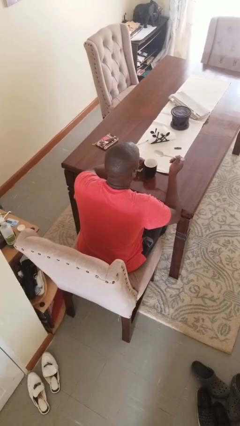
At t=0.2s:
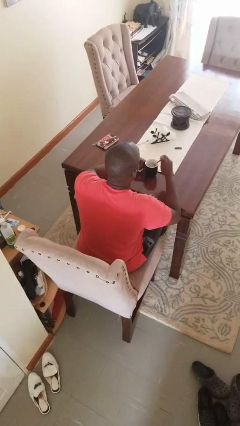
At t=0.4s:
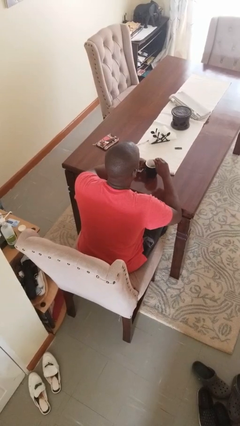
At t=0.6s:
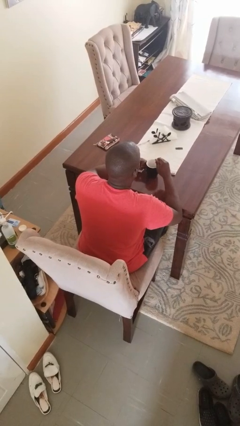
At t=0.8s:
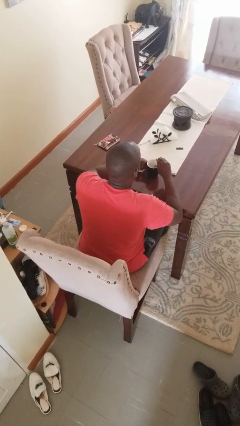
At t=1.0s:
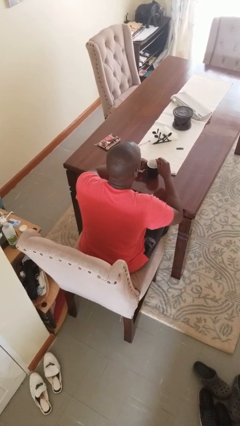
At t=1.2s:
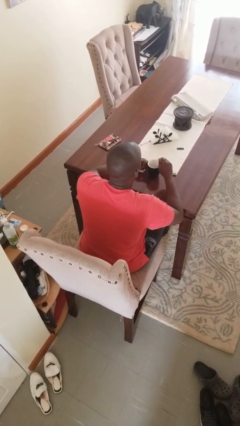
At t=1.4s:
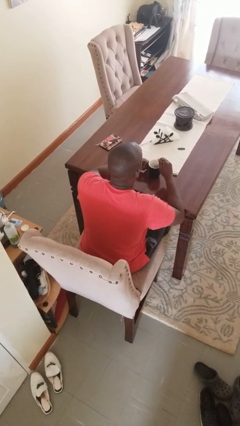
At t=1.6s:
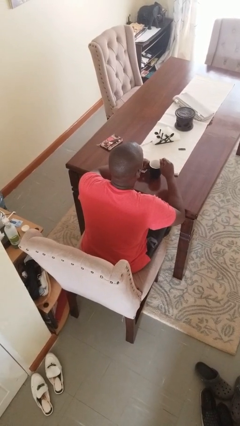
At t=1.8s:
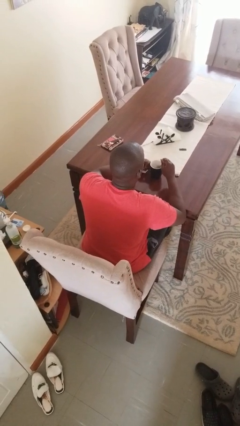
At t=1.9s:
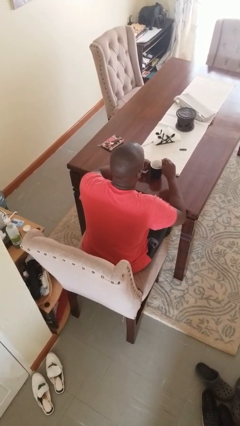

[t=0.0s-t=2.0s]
person stirs mug

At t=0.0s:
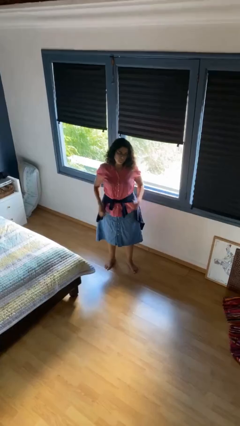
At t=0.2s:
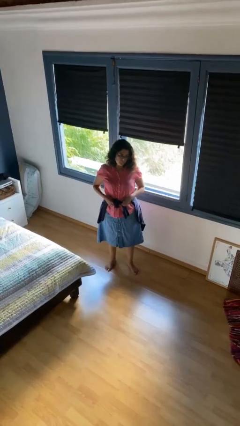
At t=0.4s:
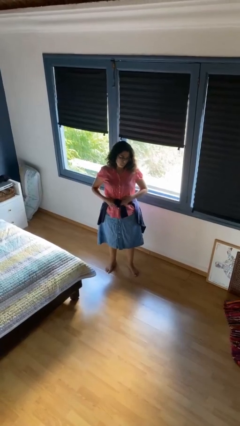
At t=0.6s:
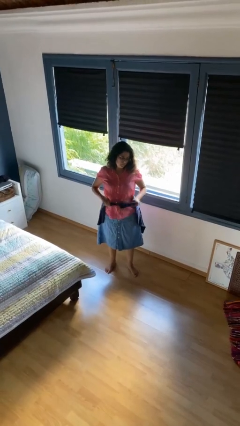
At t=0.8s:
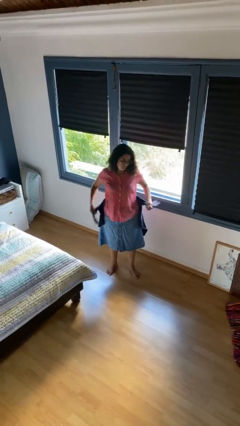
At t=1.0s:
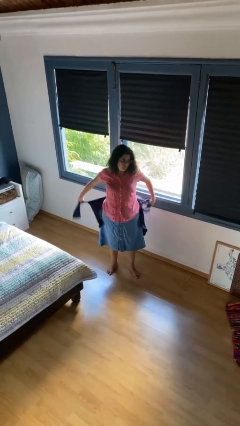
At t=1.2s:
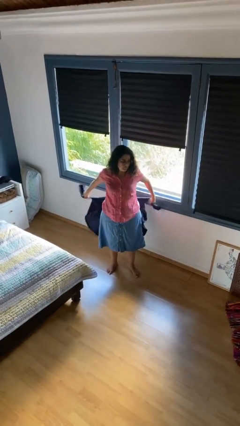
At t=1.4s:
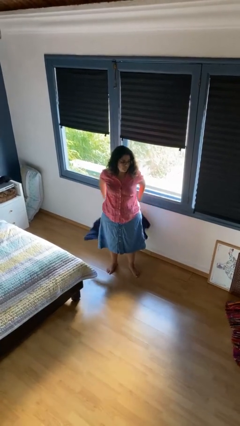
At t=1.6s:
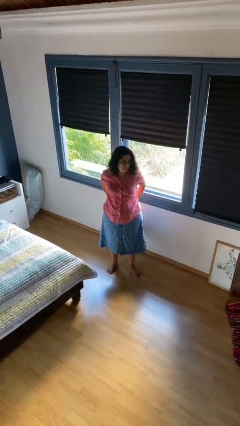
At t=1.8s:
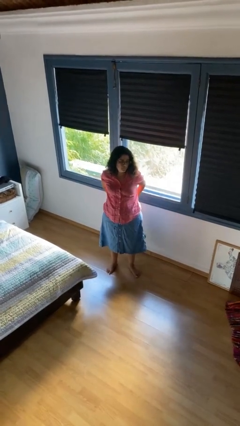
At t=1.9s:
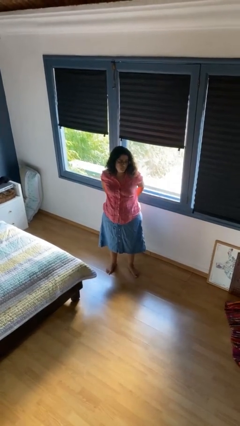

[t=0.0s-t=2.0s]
person unties jacket around waist

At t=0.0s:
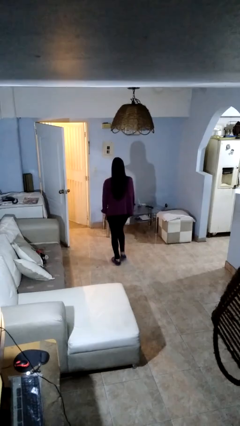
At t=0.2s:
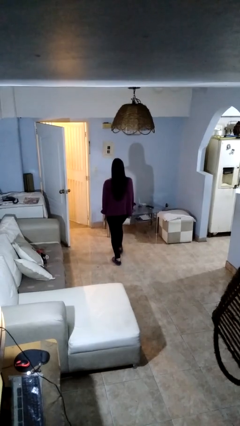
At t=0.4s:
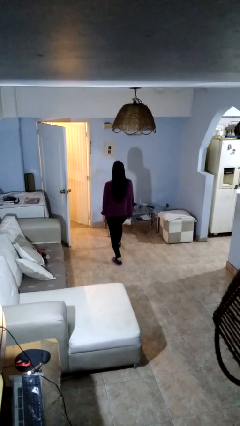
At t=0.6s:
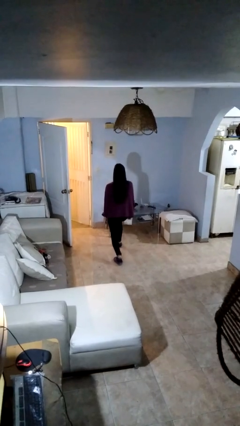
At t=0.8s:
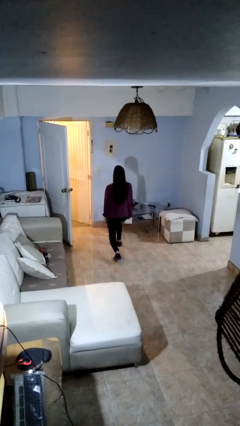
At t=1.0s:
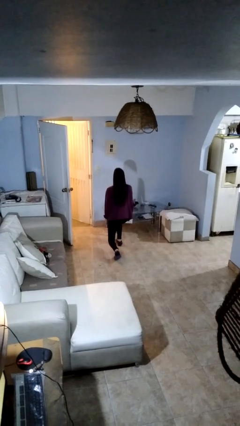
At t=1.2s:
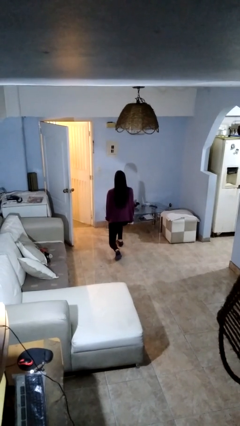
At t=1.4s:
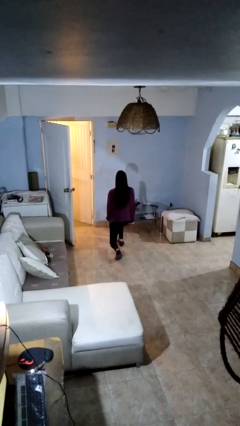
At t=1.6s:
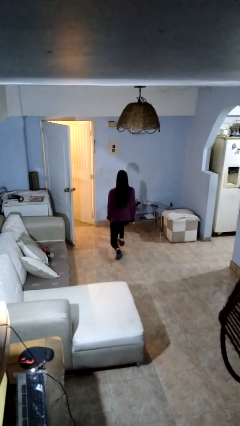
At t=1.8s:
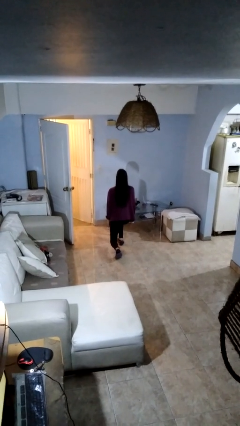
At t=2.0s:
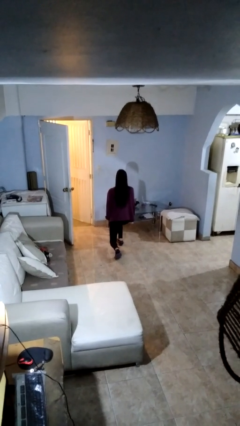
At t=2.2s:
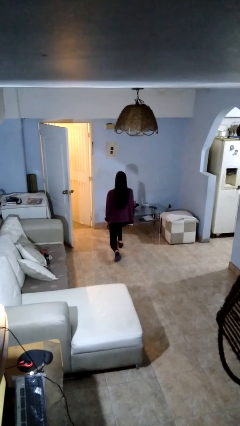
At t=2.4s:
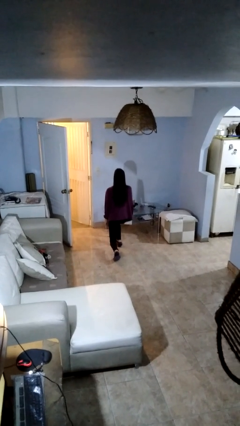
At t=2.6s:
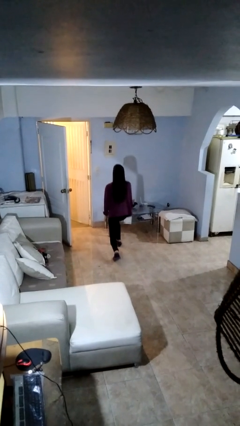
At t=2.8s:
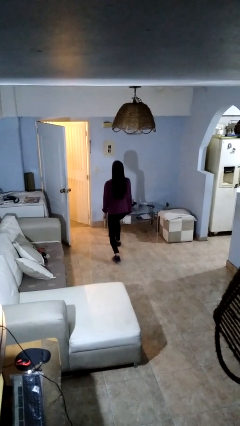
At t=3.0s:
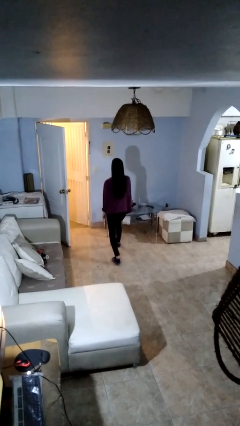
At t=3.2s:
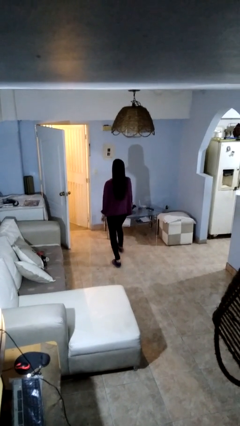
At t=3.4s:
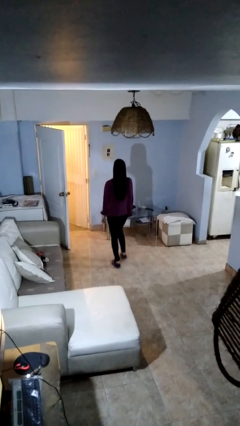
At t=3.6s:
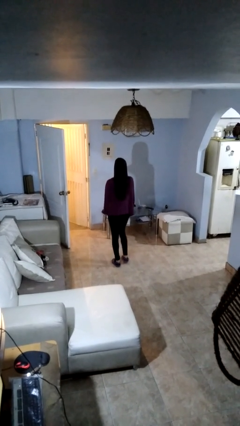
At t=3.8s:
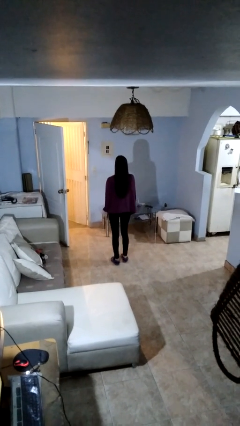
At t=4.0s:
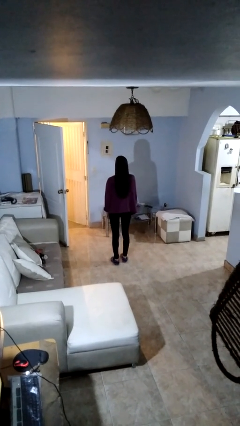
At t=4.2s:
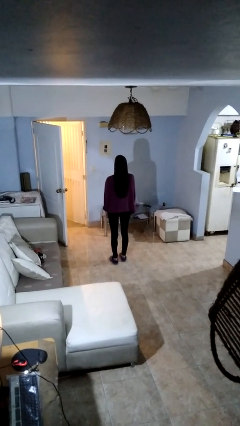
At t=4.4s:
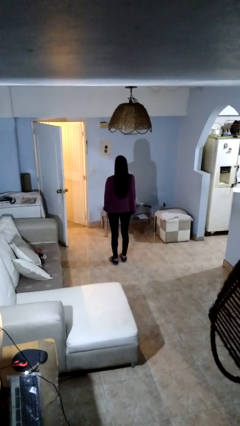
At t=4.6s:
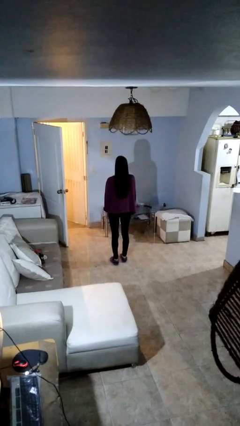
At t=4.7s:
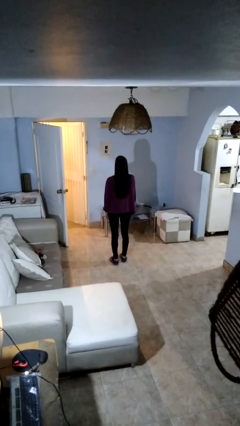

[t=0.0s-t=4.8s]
person exercises with lunges

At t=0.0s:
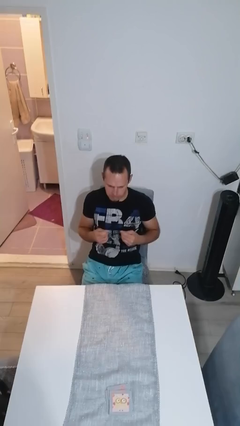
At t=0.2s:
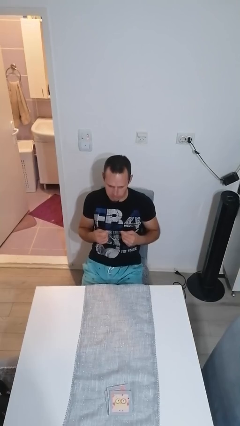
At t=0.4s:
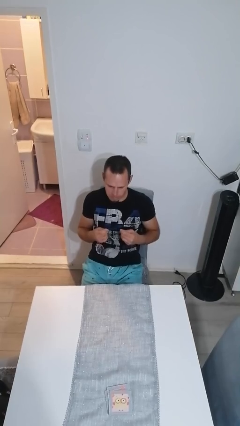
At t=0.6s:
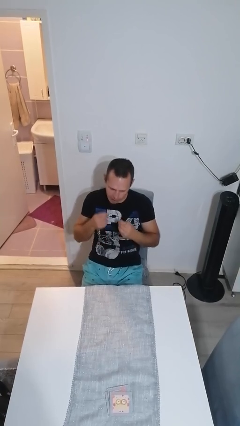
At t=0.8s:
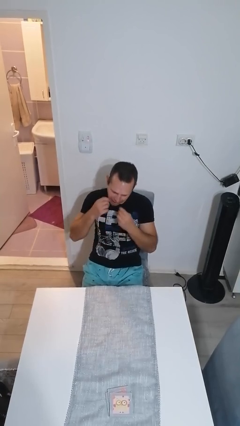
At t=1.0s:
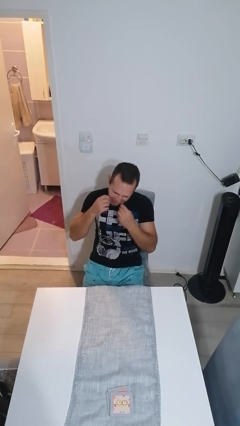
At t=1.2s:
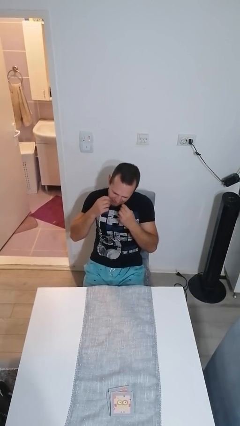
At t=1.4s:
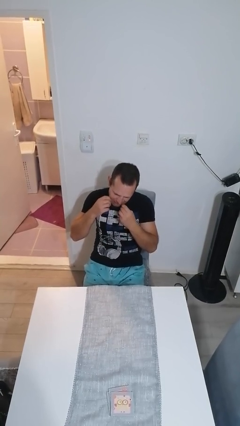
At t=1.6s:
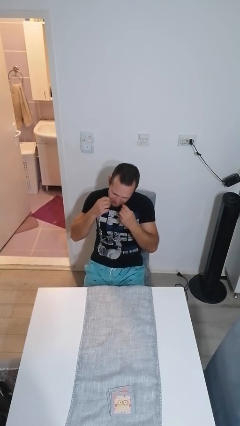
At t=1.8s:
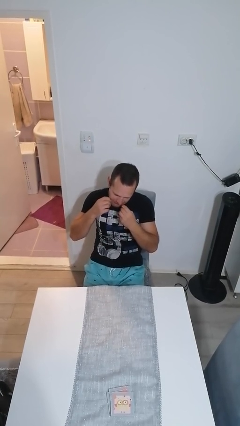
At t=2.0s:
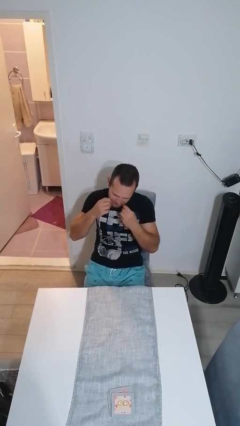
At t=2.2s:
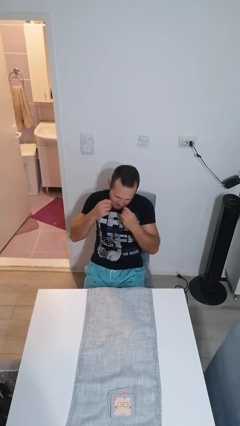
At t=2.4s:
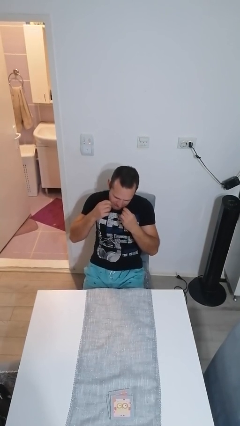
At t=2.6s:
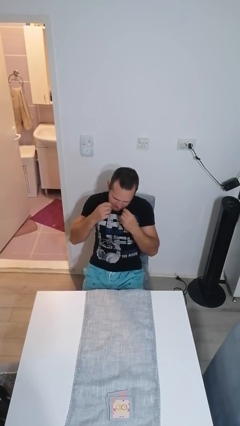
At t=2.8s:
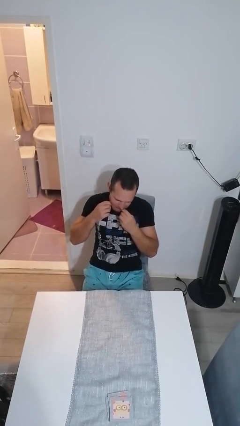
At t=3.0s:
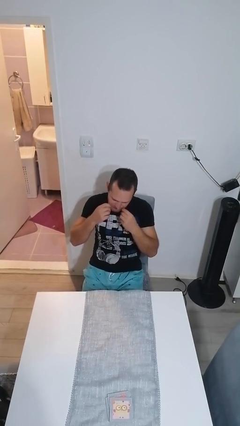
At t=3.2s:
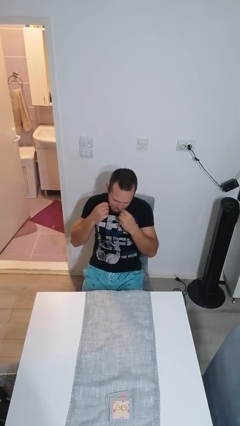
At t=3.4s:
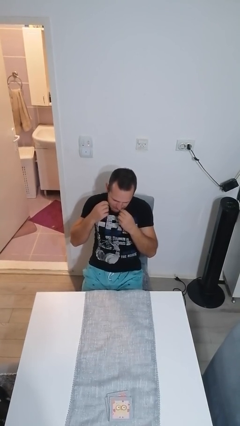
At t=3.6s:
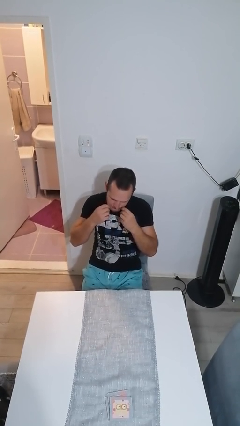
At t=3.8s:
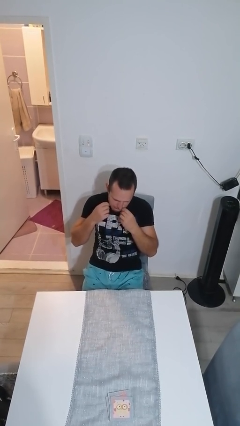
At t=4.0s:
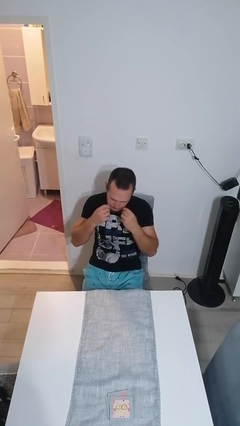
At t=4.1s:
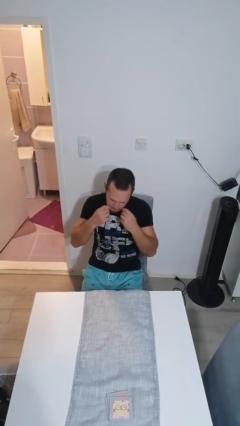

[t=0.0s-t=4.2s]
person flosses

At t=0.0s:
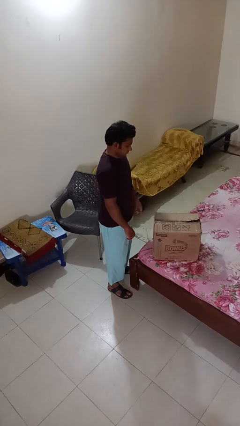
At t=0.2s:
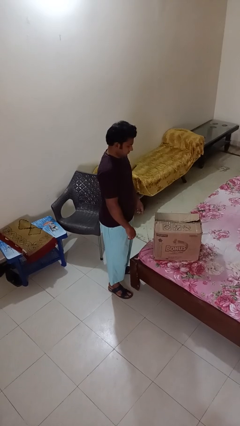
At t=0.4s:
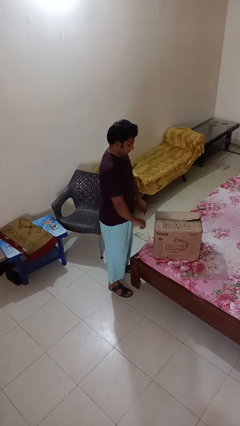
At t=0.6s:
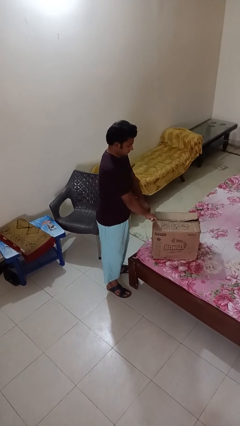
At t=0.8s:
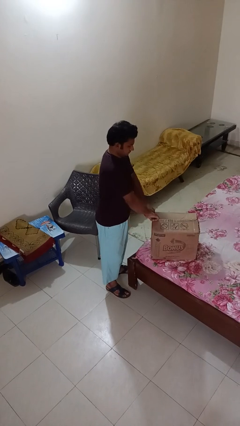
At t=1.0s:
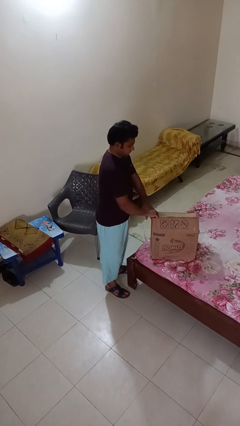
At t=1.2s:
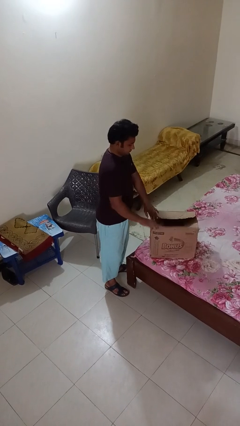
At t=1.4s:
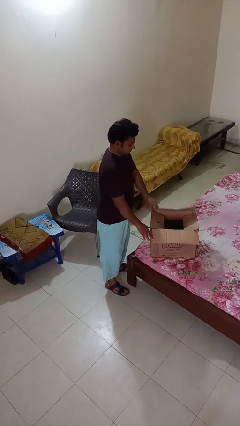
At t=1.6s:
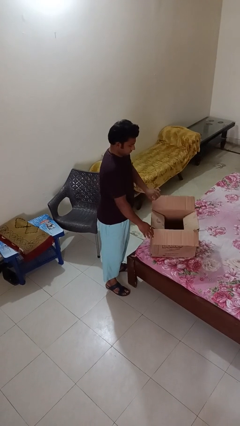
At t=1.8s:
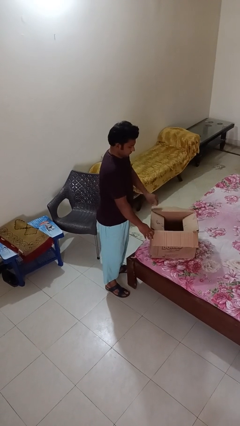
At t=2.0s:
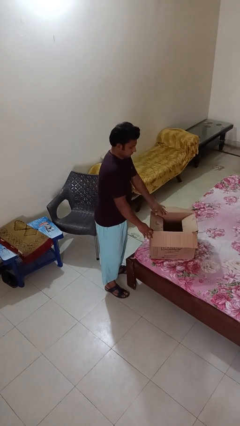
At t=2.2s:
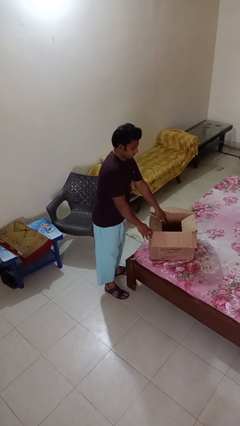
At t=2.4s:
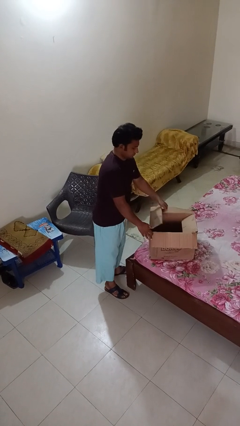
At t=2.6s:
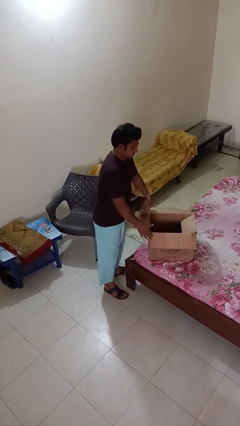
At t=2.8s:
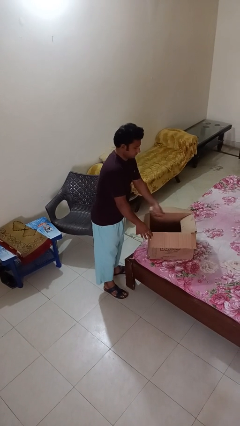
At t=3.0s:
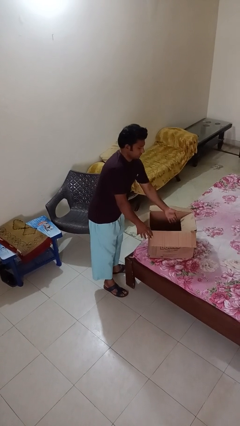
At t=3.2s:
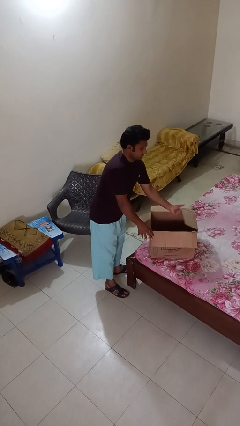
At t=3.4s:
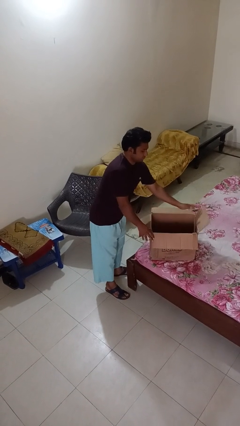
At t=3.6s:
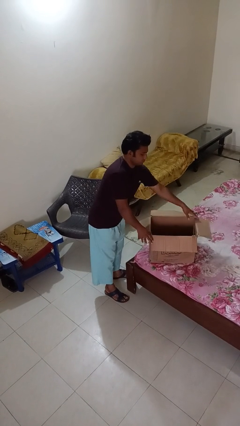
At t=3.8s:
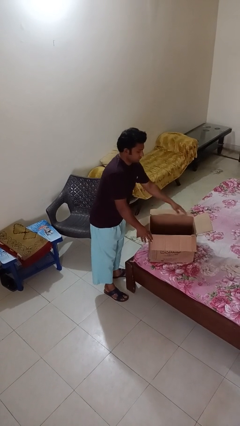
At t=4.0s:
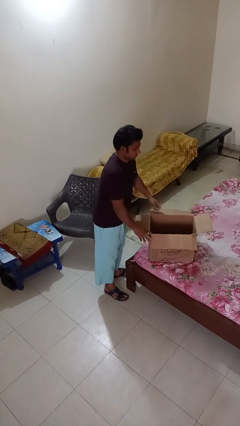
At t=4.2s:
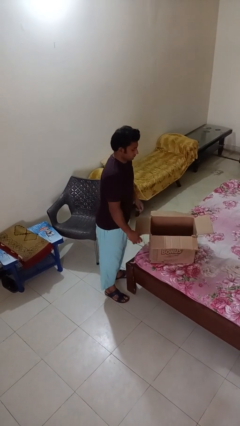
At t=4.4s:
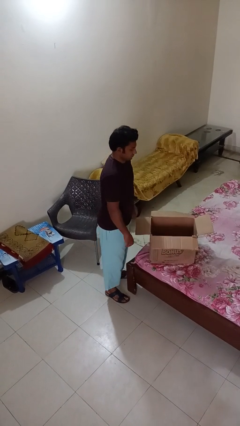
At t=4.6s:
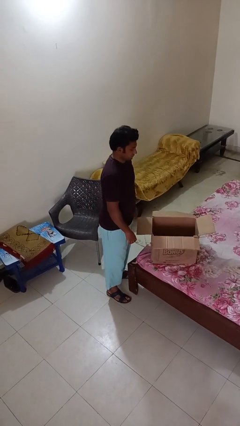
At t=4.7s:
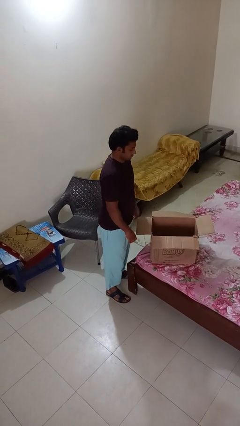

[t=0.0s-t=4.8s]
person opens box
